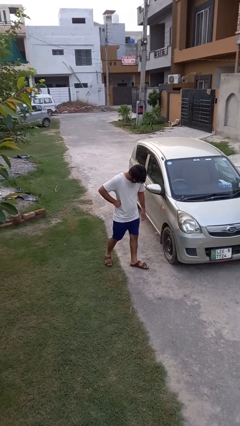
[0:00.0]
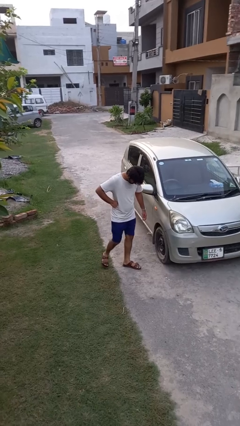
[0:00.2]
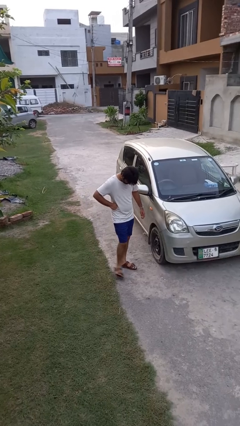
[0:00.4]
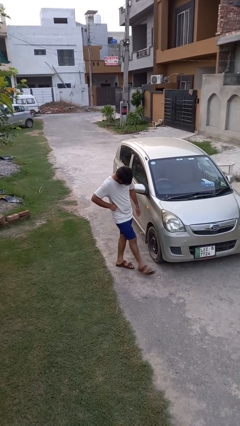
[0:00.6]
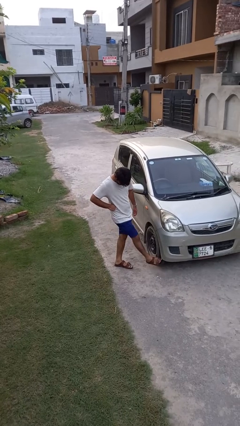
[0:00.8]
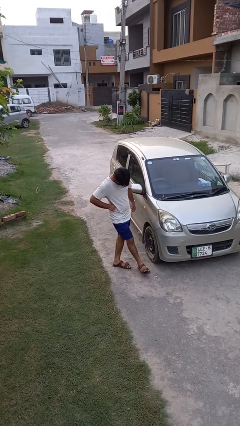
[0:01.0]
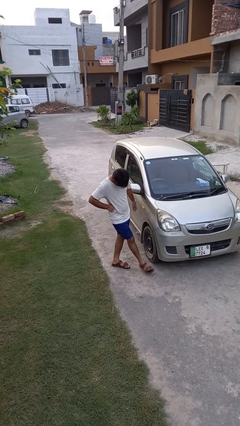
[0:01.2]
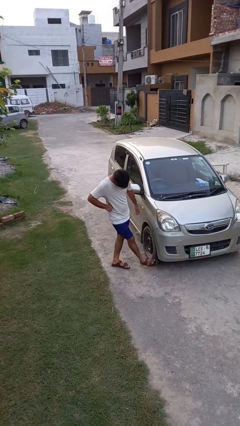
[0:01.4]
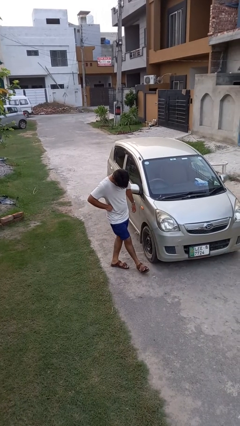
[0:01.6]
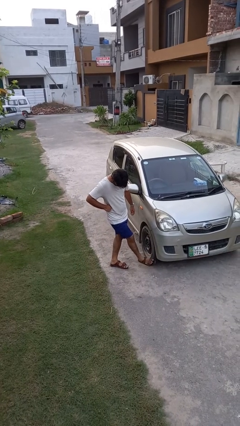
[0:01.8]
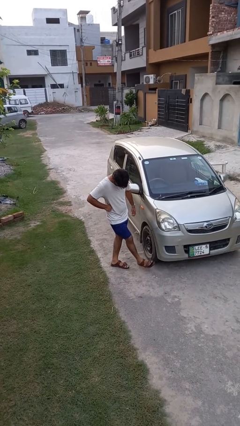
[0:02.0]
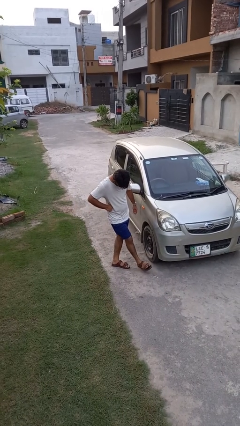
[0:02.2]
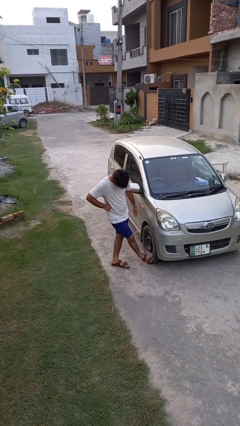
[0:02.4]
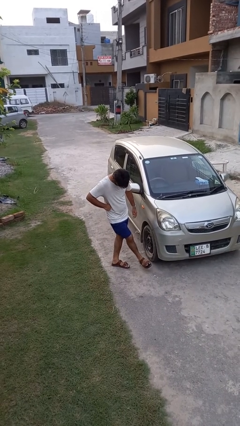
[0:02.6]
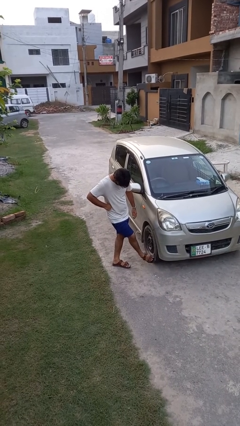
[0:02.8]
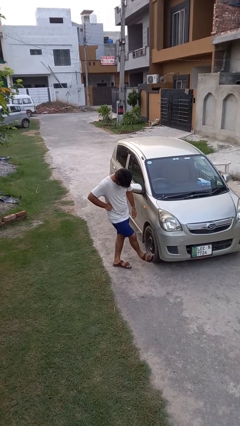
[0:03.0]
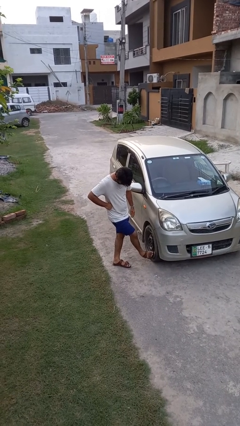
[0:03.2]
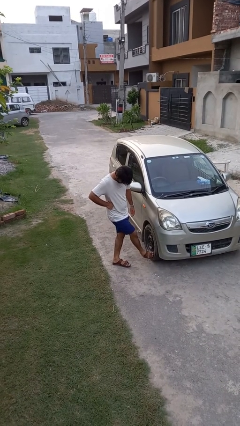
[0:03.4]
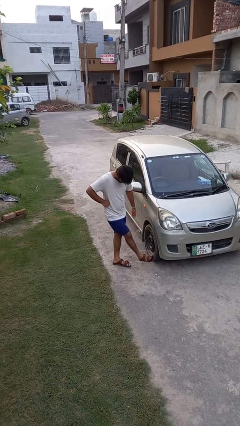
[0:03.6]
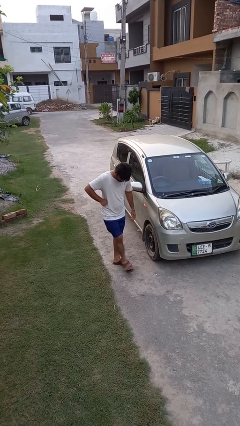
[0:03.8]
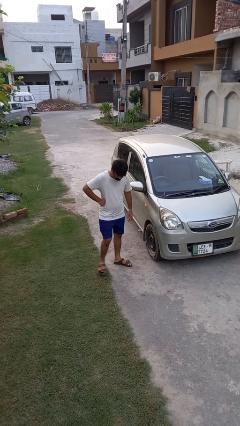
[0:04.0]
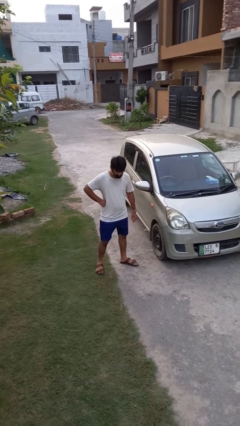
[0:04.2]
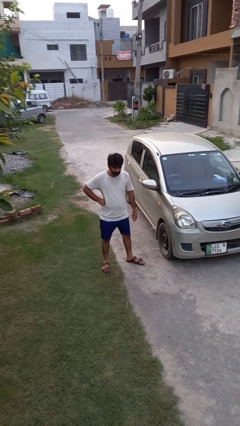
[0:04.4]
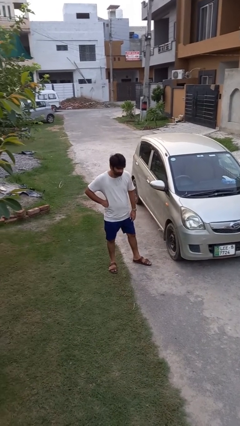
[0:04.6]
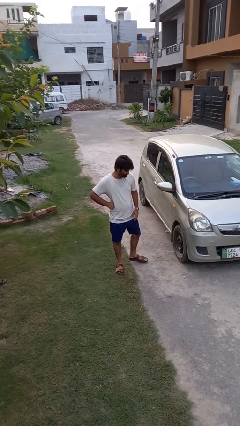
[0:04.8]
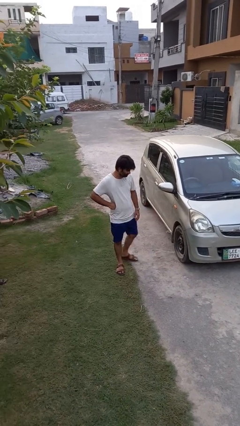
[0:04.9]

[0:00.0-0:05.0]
person kicks car tires

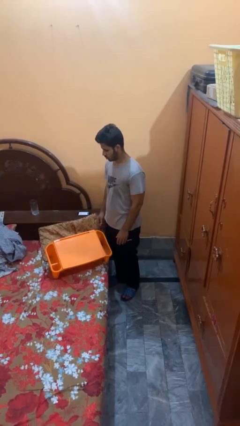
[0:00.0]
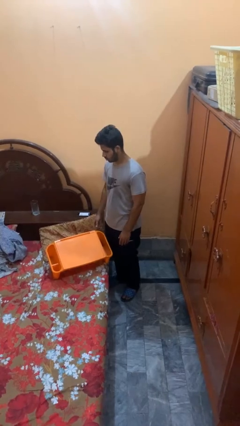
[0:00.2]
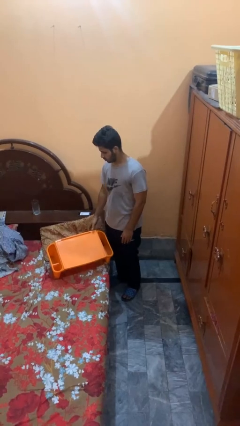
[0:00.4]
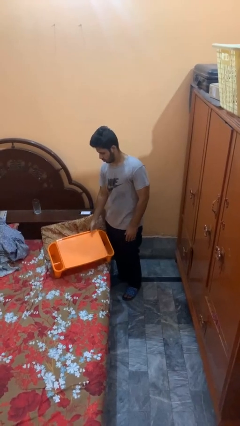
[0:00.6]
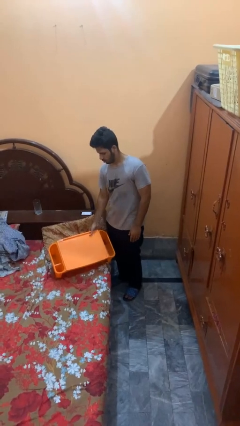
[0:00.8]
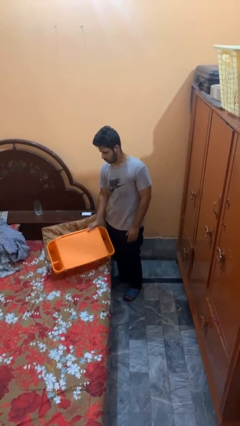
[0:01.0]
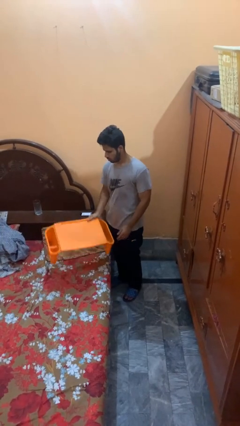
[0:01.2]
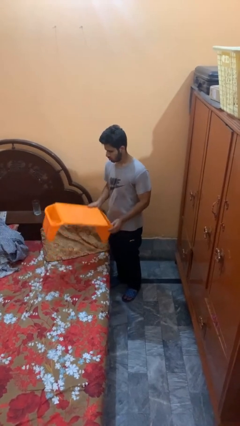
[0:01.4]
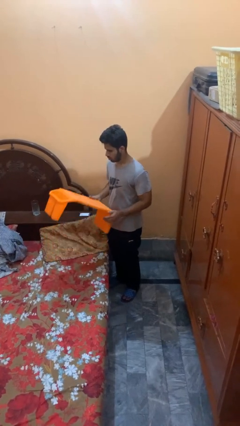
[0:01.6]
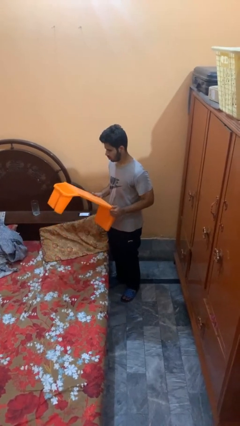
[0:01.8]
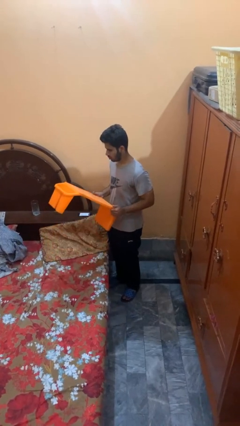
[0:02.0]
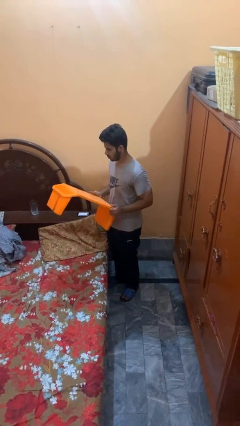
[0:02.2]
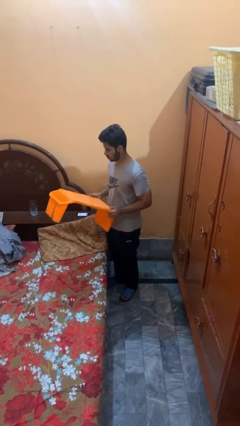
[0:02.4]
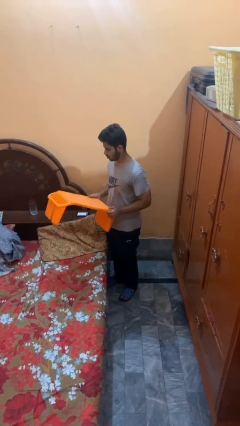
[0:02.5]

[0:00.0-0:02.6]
person picks up object from bed

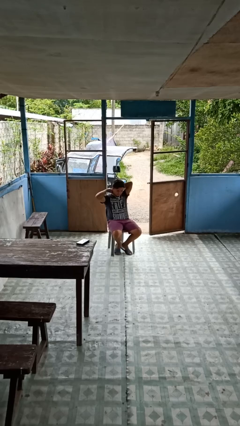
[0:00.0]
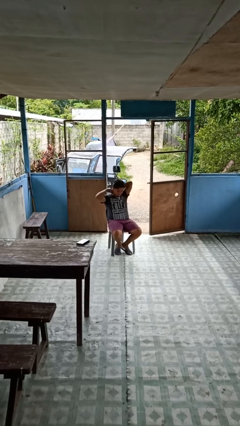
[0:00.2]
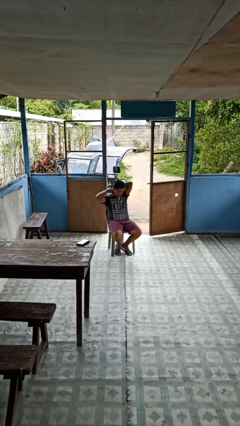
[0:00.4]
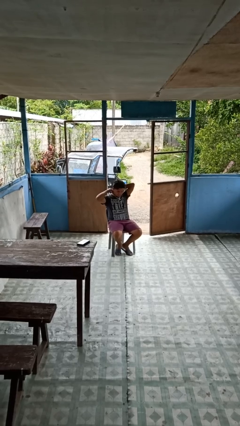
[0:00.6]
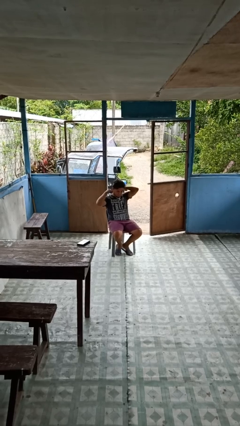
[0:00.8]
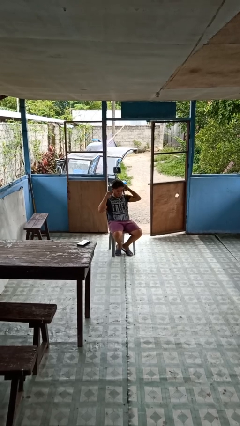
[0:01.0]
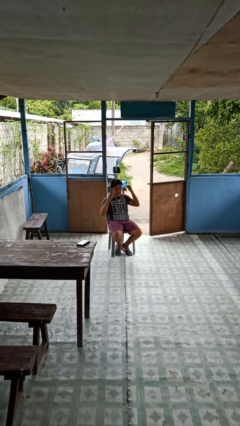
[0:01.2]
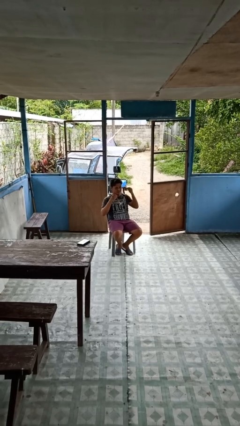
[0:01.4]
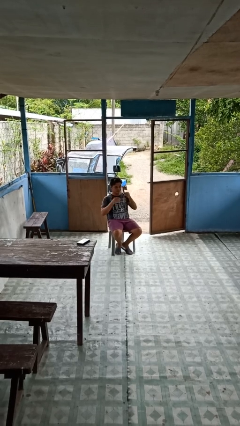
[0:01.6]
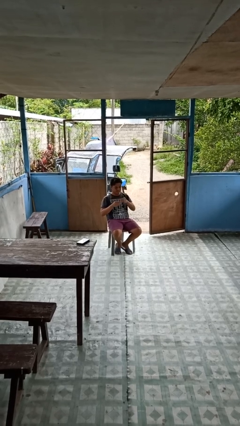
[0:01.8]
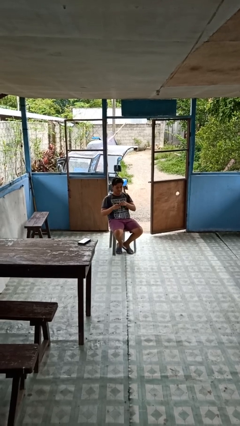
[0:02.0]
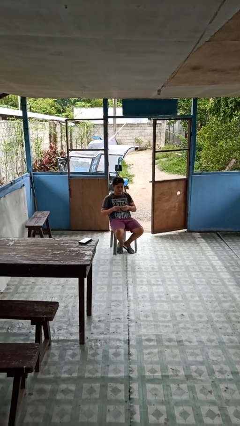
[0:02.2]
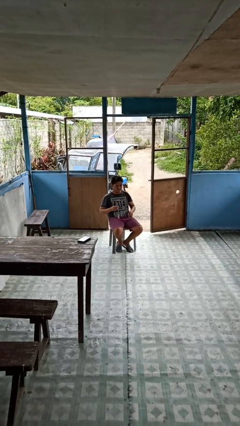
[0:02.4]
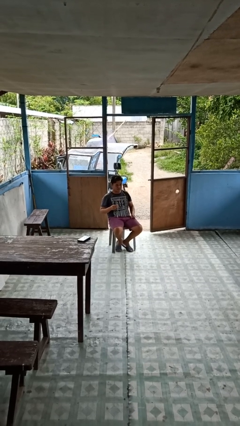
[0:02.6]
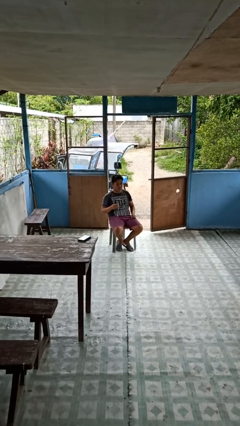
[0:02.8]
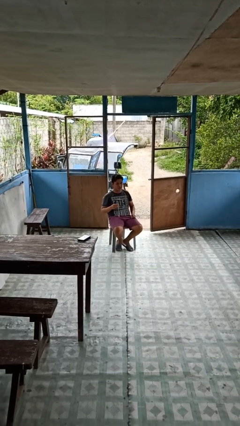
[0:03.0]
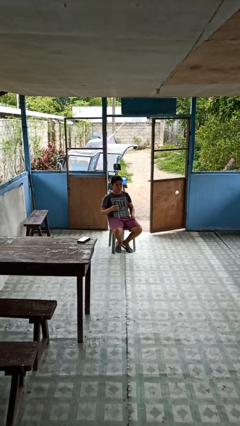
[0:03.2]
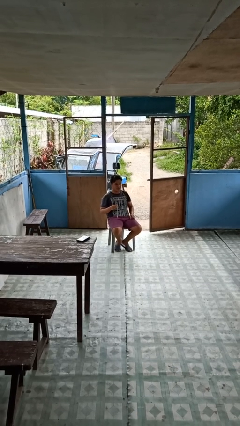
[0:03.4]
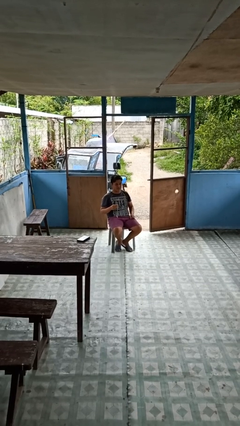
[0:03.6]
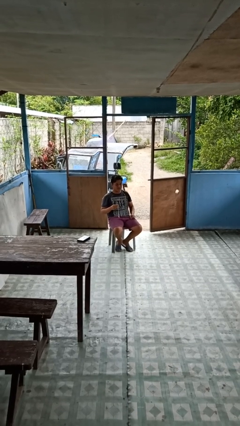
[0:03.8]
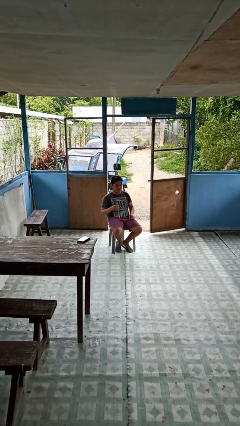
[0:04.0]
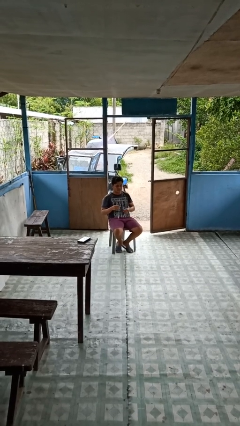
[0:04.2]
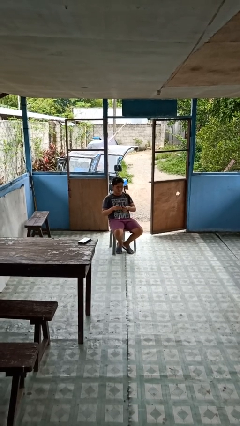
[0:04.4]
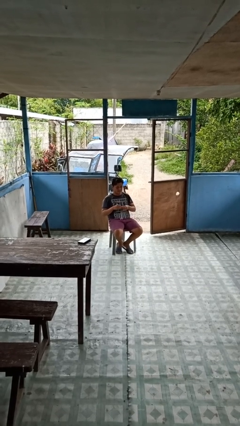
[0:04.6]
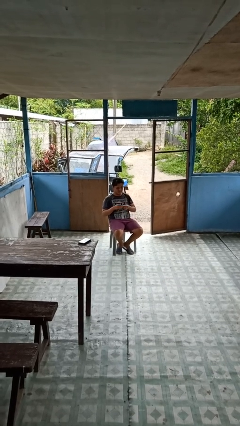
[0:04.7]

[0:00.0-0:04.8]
person takes off necklace

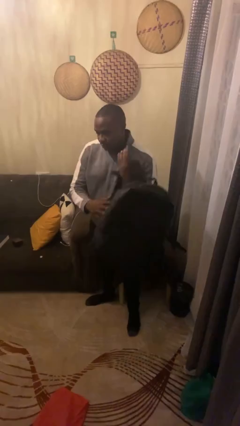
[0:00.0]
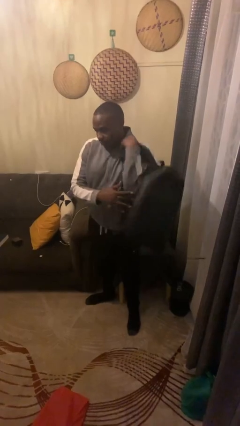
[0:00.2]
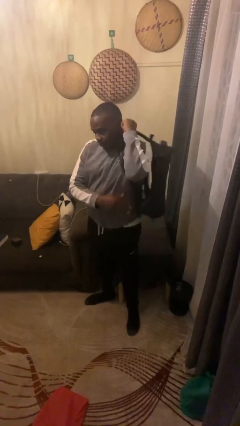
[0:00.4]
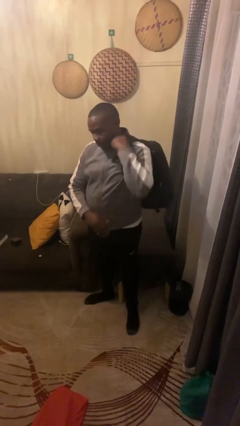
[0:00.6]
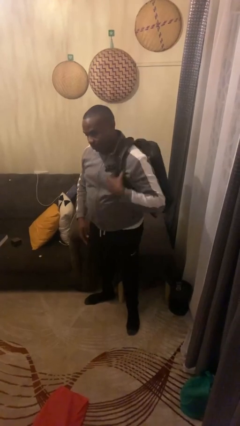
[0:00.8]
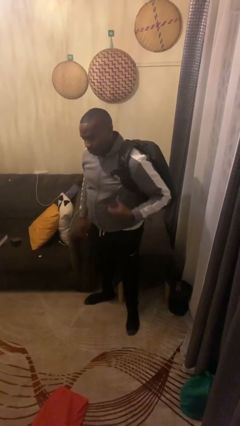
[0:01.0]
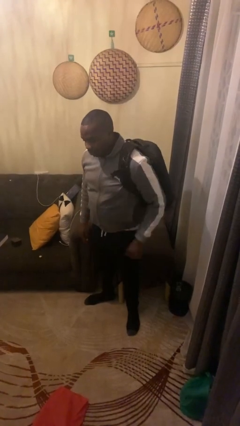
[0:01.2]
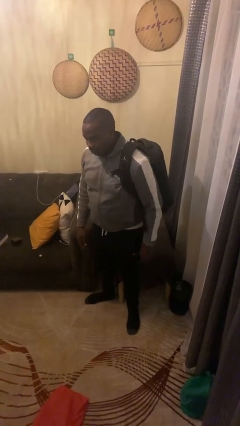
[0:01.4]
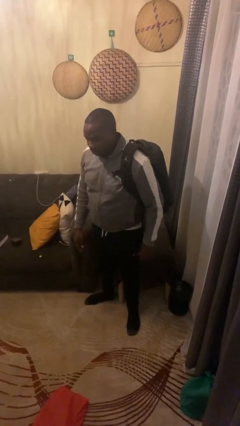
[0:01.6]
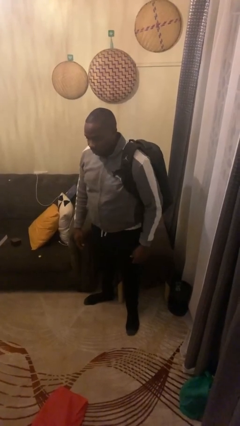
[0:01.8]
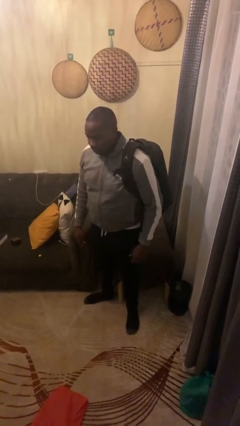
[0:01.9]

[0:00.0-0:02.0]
person puts on backpack

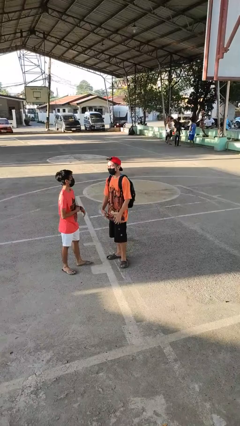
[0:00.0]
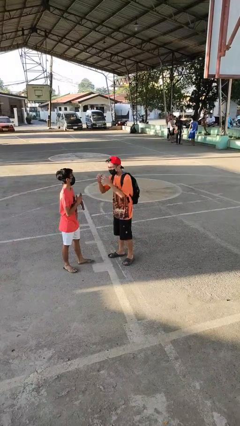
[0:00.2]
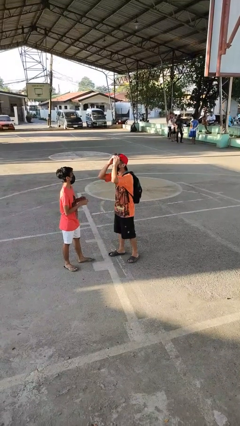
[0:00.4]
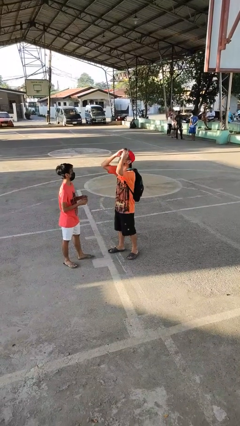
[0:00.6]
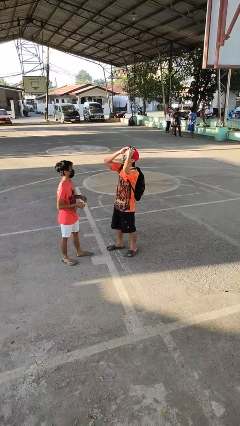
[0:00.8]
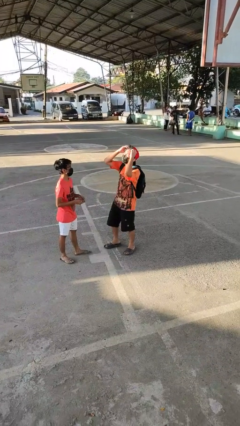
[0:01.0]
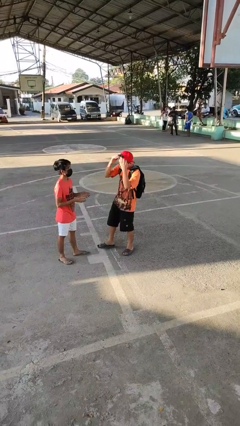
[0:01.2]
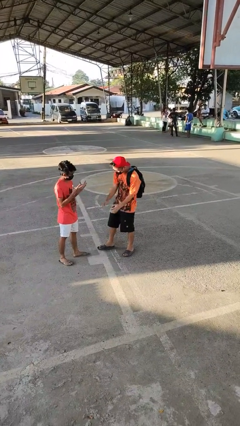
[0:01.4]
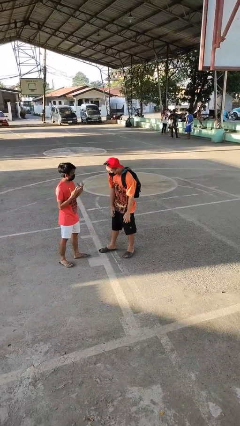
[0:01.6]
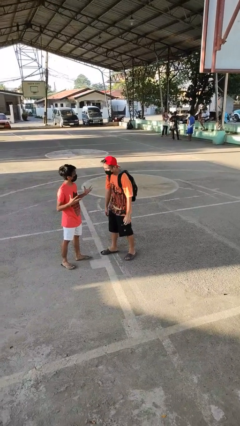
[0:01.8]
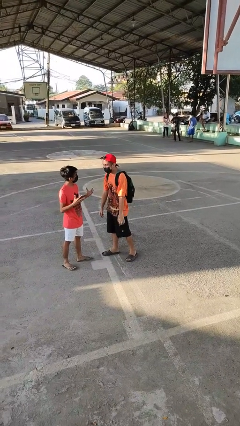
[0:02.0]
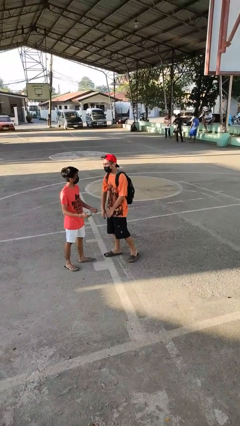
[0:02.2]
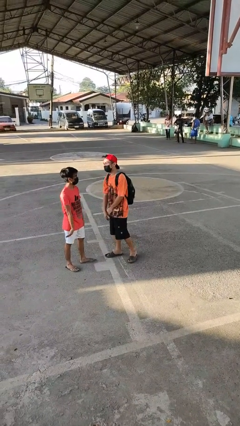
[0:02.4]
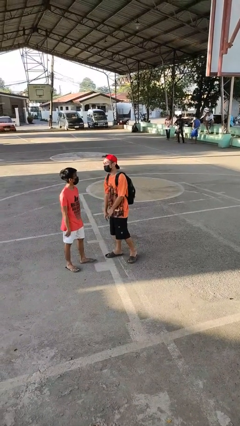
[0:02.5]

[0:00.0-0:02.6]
person laughs with person

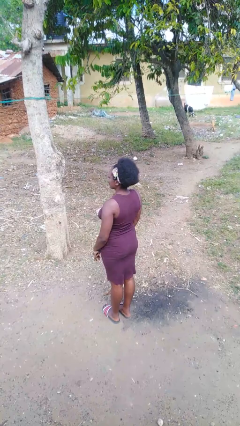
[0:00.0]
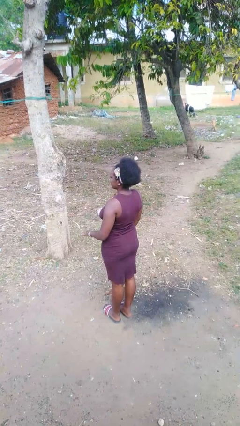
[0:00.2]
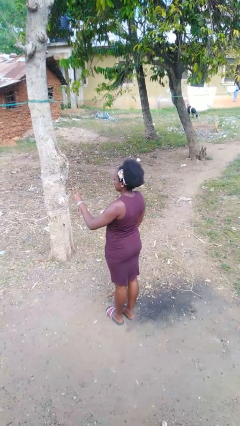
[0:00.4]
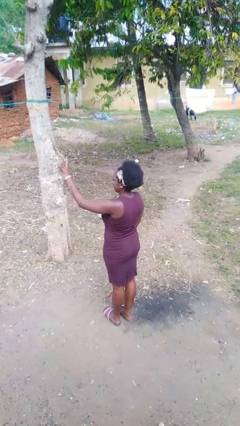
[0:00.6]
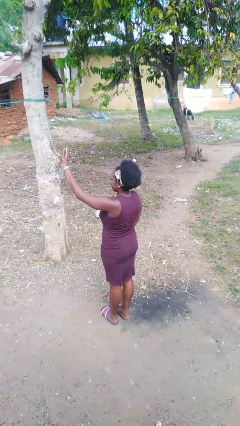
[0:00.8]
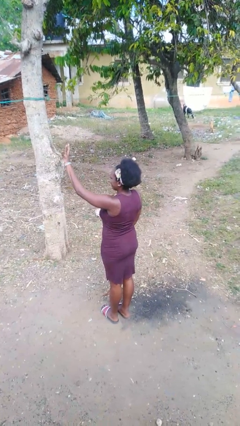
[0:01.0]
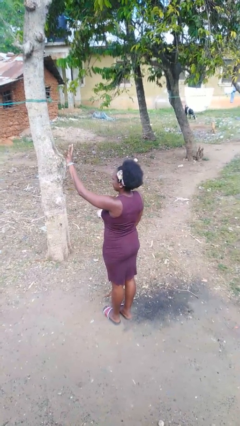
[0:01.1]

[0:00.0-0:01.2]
person gestures number four
